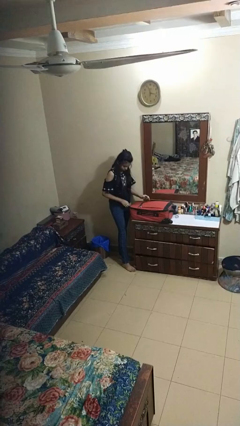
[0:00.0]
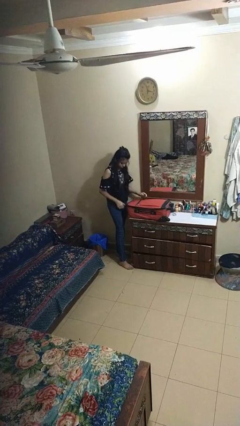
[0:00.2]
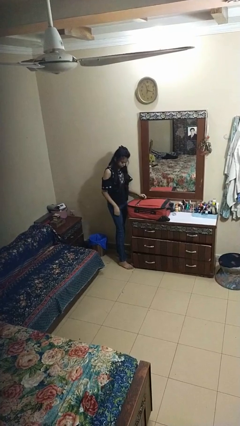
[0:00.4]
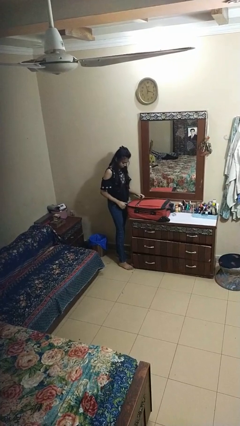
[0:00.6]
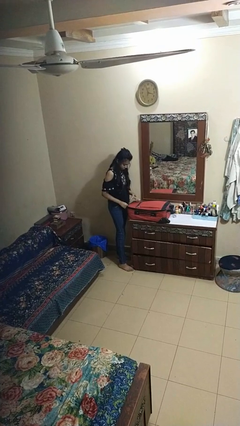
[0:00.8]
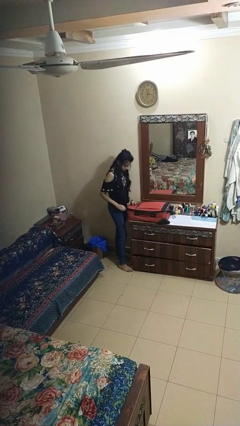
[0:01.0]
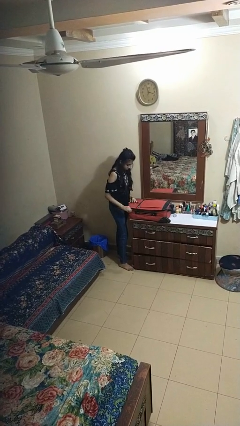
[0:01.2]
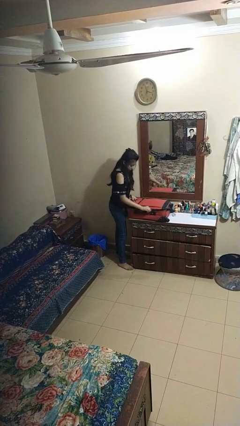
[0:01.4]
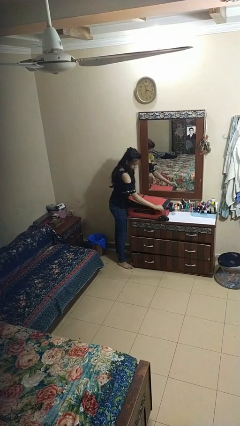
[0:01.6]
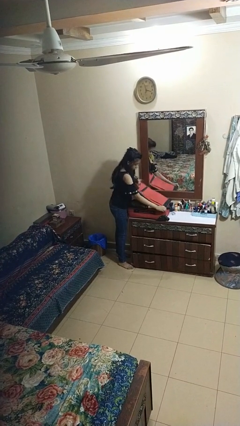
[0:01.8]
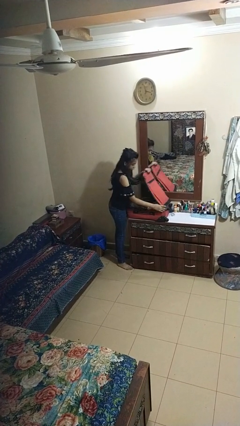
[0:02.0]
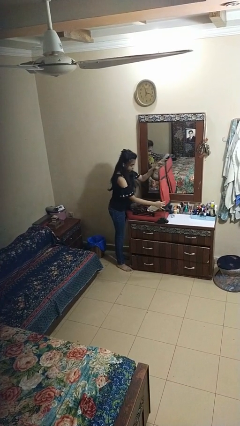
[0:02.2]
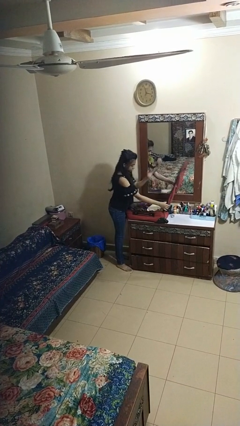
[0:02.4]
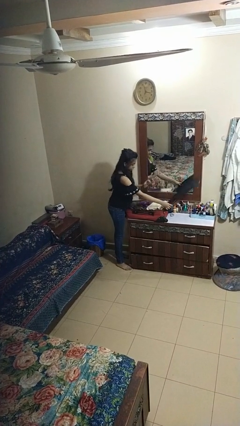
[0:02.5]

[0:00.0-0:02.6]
person opens suitcase

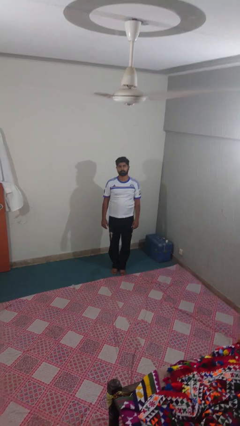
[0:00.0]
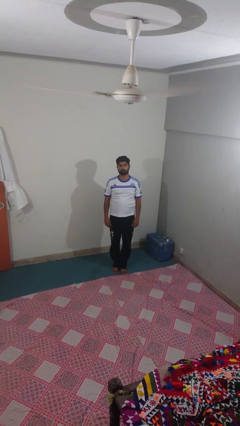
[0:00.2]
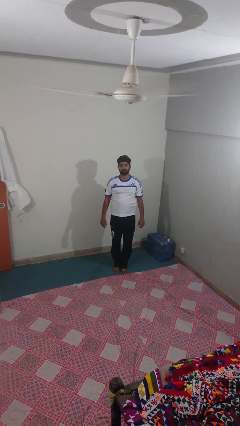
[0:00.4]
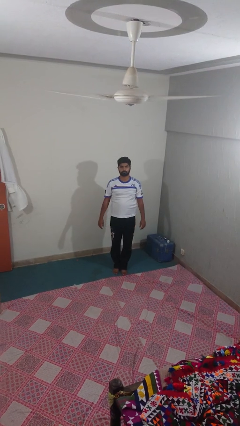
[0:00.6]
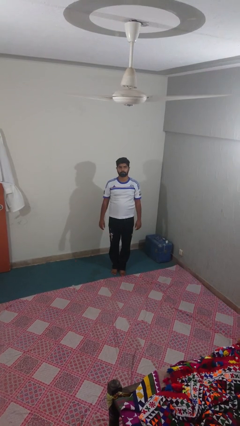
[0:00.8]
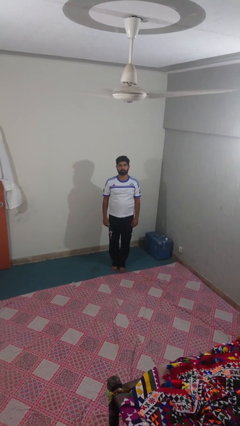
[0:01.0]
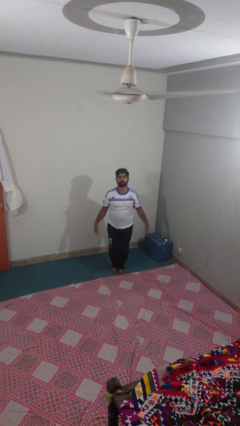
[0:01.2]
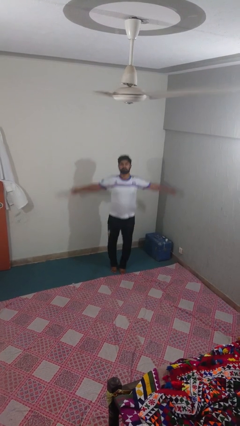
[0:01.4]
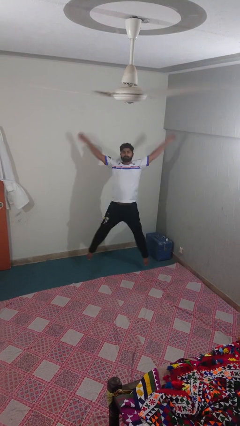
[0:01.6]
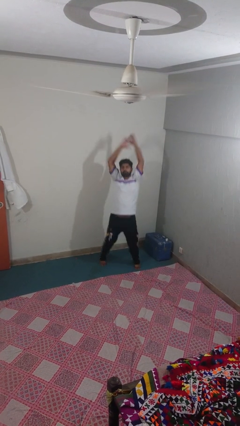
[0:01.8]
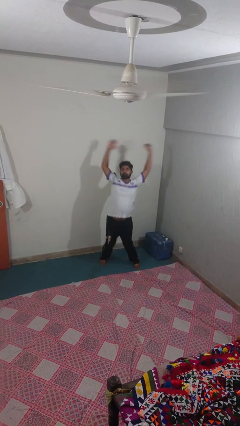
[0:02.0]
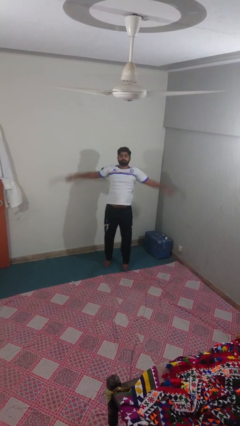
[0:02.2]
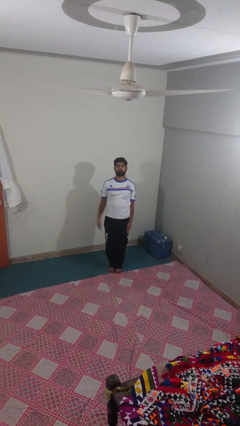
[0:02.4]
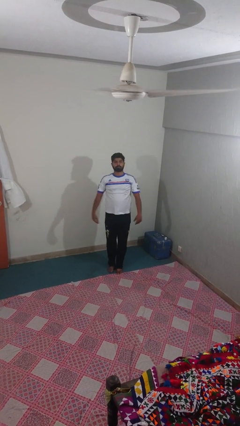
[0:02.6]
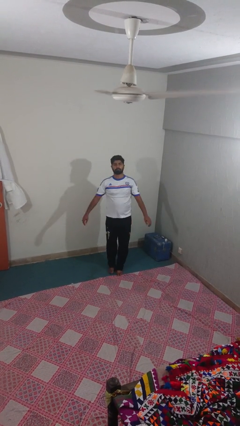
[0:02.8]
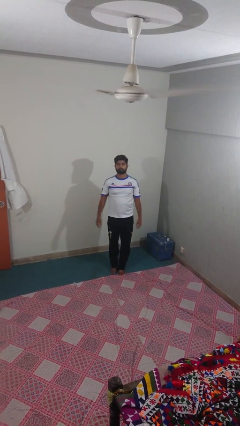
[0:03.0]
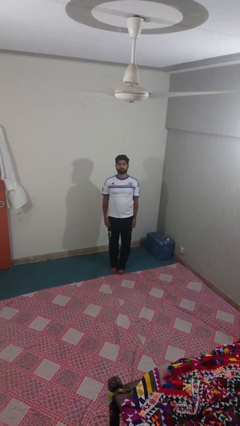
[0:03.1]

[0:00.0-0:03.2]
person exercises with jumping jacks

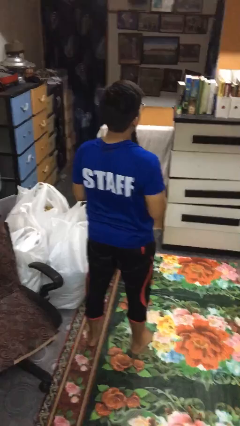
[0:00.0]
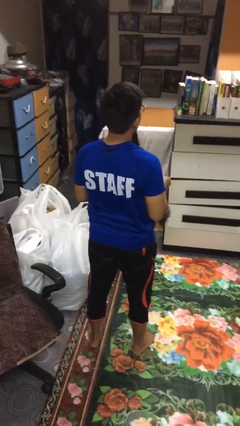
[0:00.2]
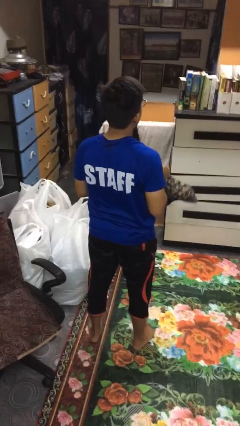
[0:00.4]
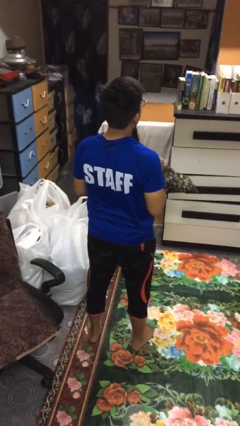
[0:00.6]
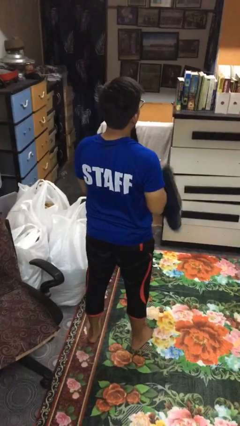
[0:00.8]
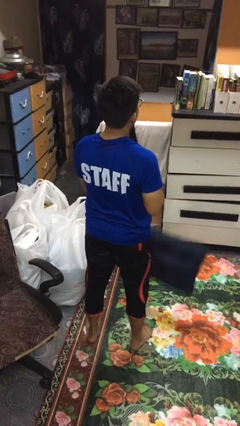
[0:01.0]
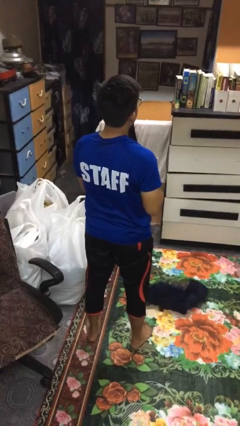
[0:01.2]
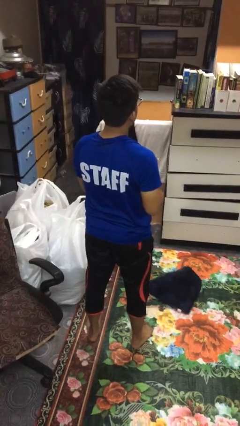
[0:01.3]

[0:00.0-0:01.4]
person drops object

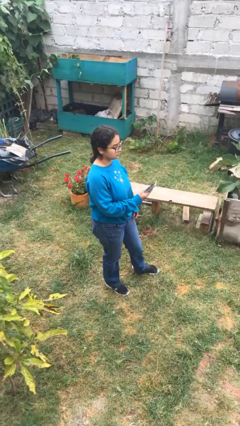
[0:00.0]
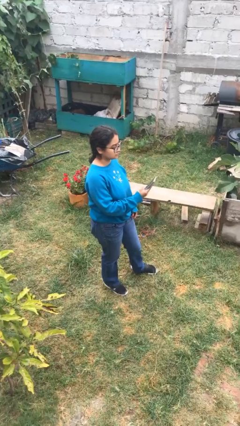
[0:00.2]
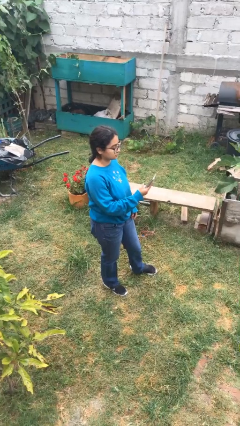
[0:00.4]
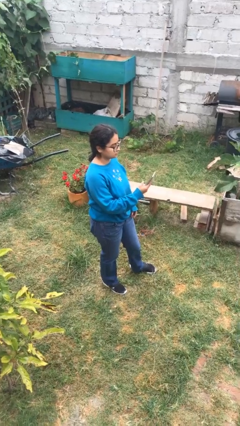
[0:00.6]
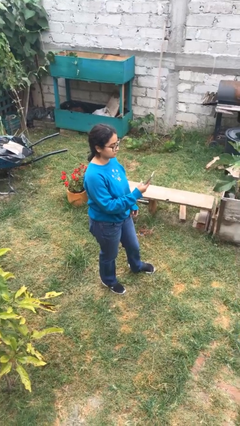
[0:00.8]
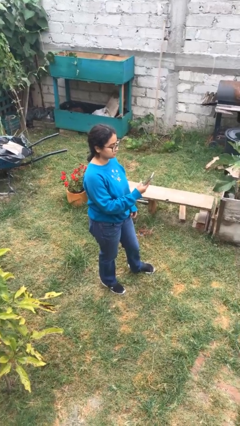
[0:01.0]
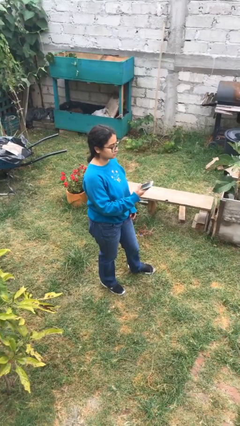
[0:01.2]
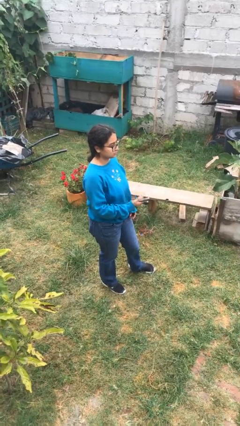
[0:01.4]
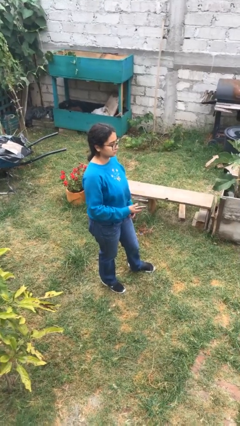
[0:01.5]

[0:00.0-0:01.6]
person puts phone into pocket

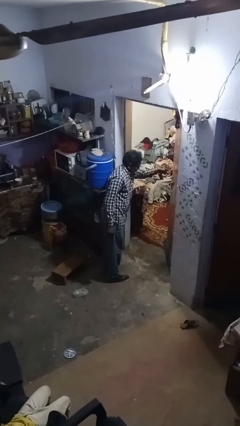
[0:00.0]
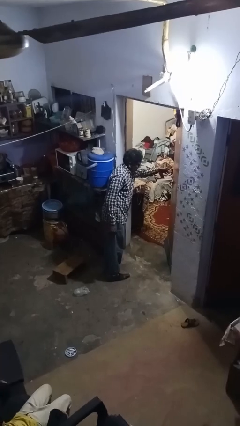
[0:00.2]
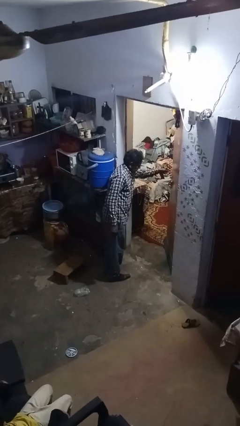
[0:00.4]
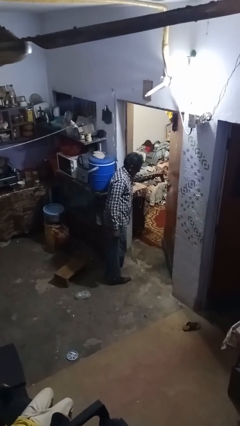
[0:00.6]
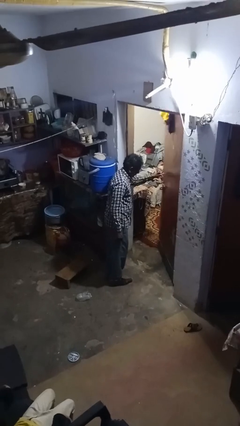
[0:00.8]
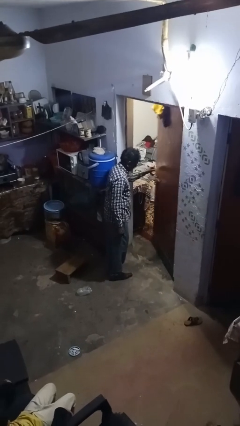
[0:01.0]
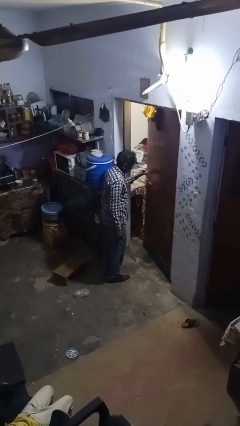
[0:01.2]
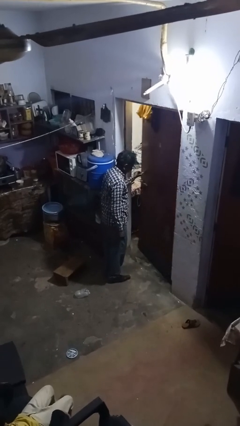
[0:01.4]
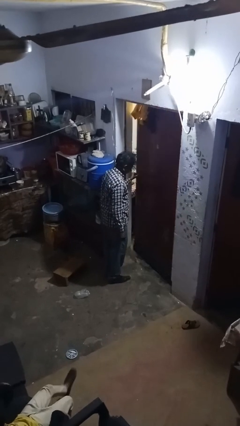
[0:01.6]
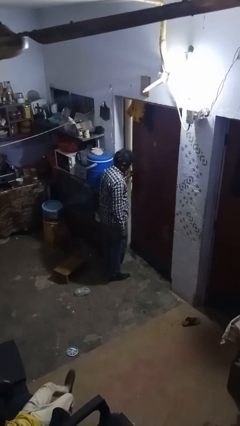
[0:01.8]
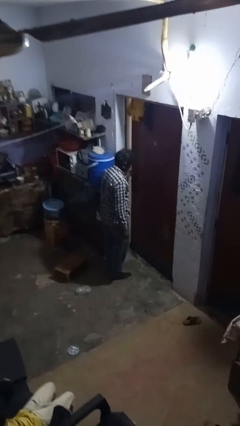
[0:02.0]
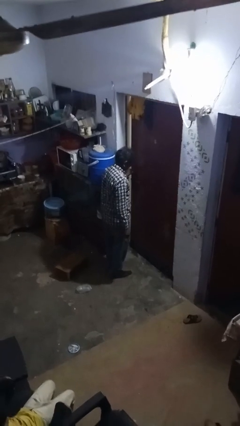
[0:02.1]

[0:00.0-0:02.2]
person closes facility door

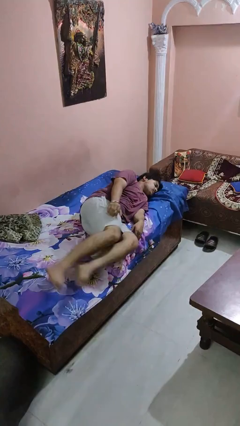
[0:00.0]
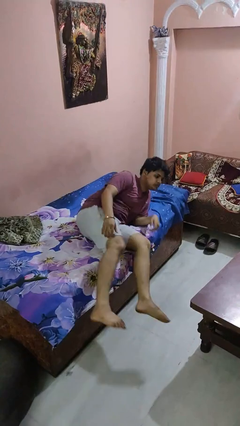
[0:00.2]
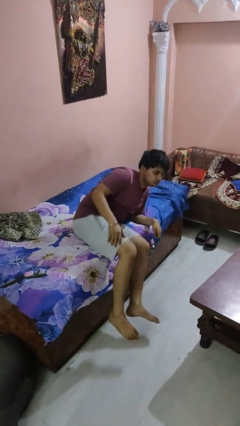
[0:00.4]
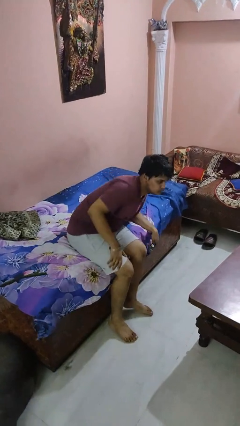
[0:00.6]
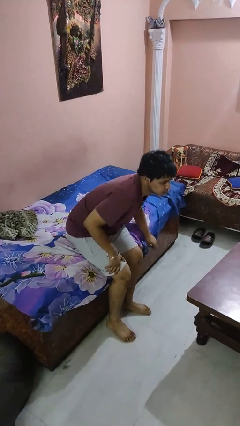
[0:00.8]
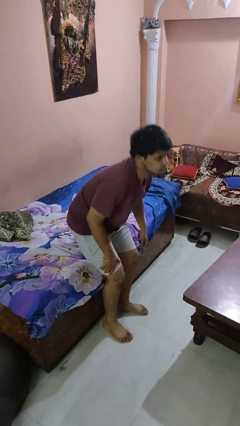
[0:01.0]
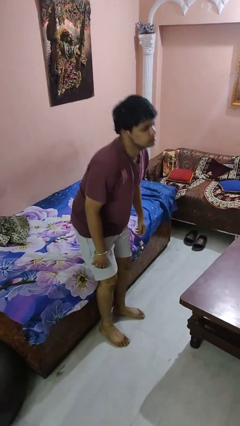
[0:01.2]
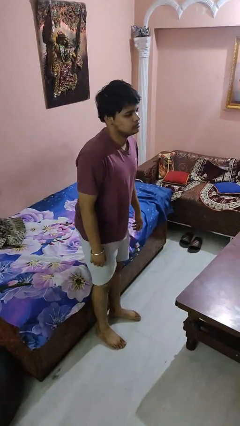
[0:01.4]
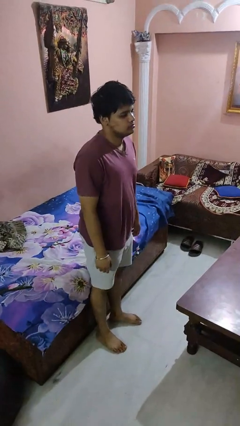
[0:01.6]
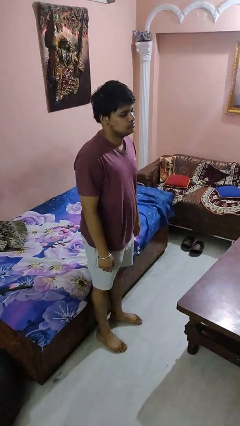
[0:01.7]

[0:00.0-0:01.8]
person stands up

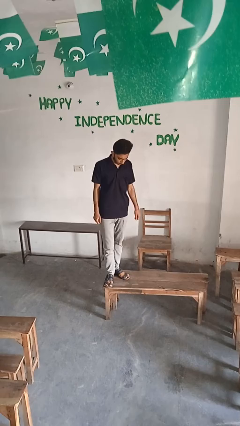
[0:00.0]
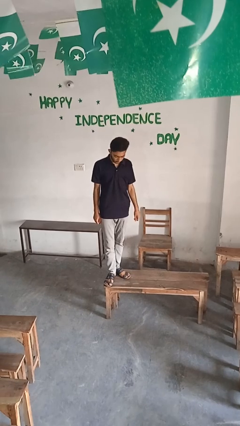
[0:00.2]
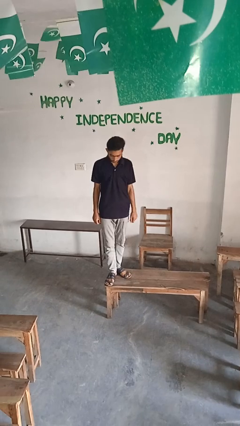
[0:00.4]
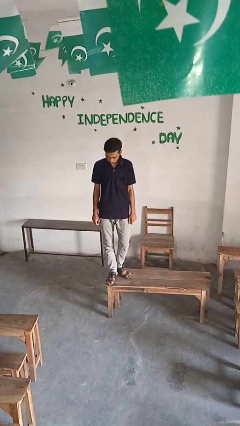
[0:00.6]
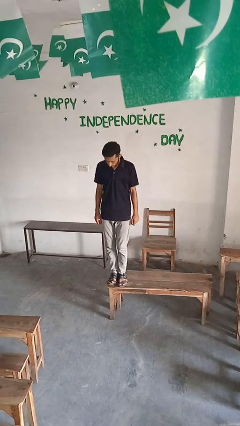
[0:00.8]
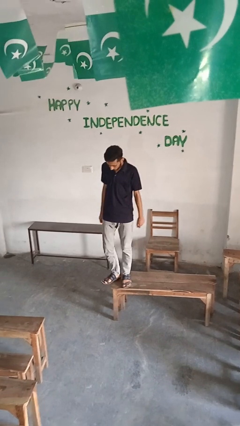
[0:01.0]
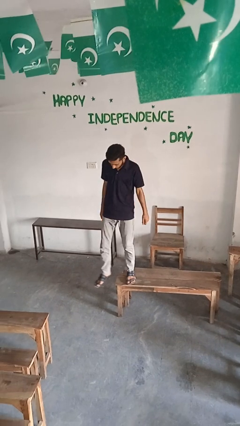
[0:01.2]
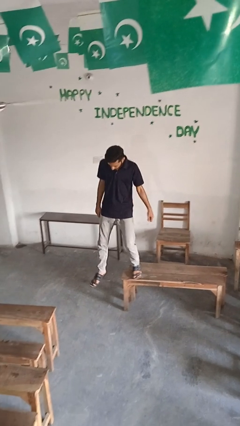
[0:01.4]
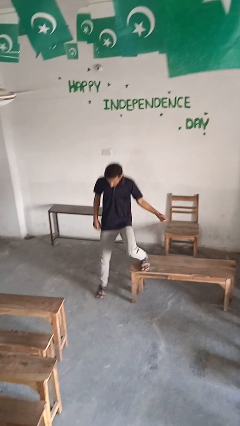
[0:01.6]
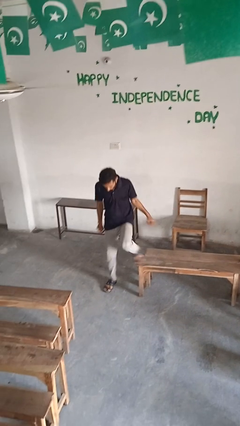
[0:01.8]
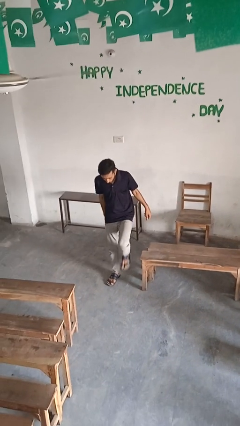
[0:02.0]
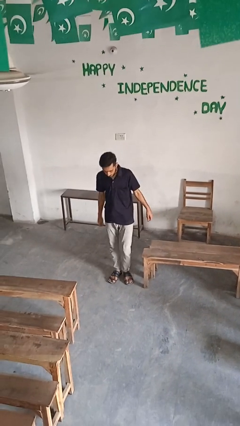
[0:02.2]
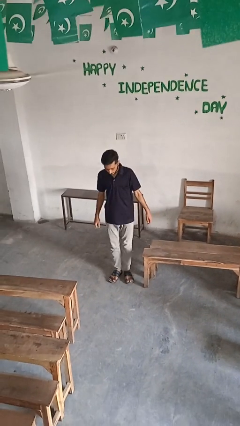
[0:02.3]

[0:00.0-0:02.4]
person climbs off table

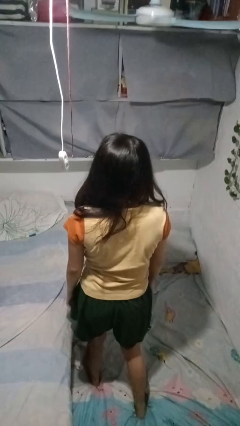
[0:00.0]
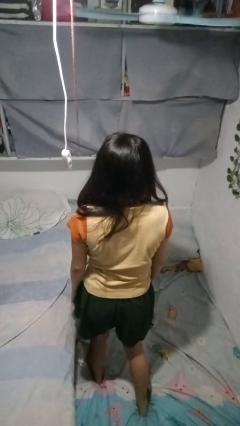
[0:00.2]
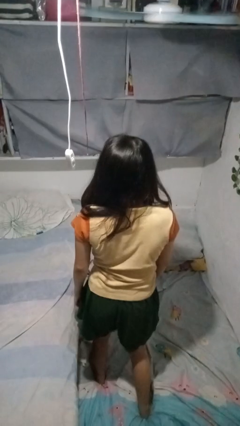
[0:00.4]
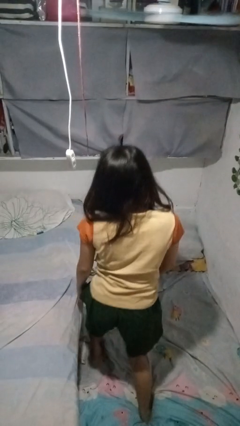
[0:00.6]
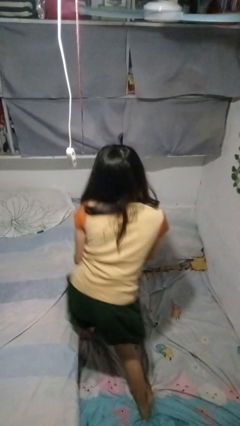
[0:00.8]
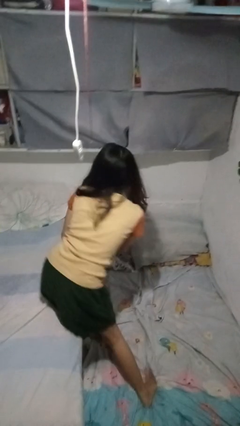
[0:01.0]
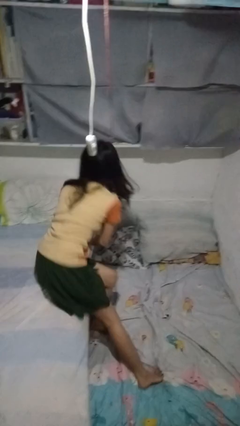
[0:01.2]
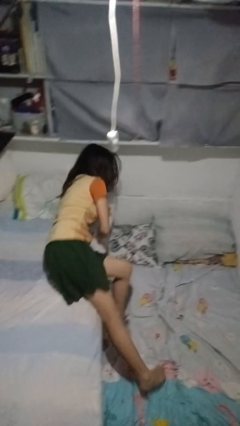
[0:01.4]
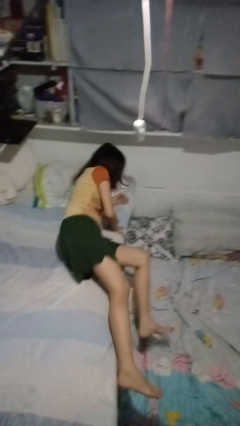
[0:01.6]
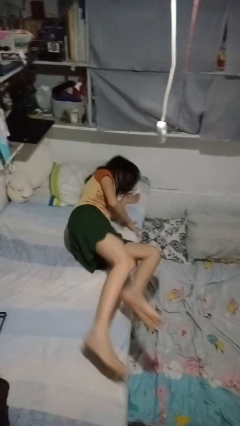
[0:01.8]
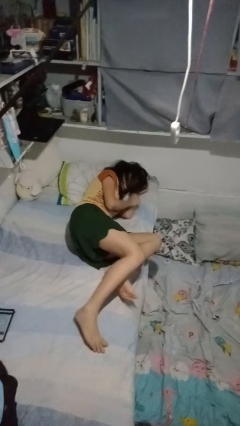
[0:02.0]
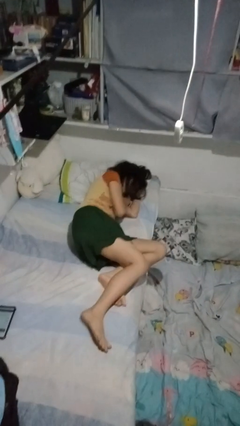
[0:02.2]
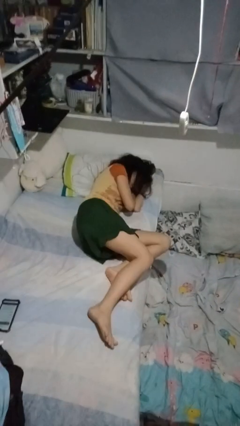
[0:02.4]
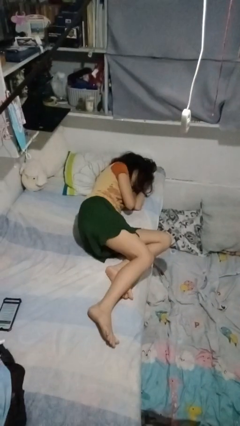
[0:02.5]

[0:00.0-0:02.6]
person lies down on bed
